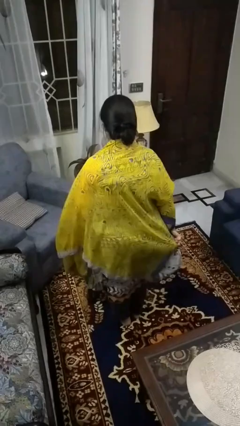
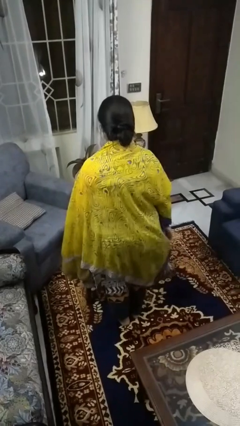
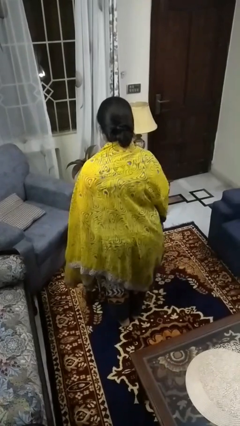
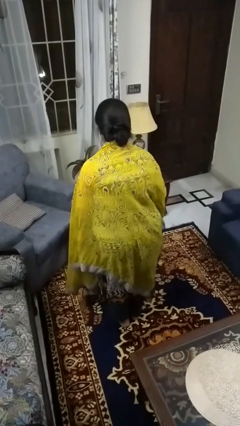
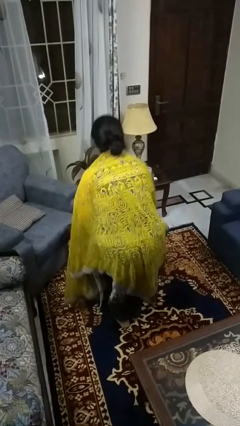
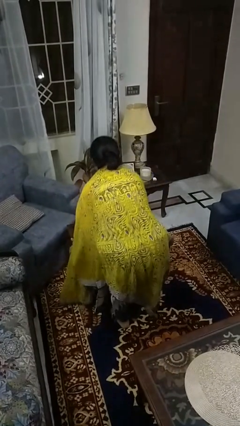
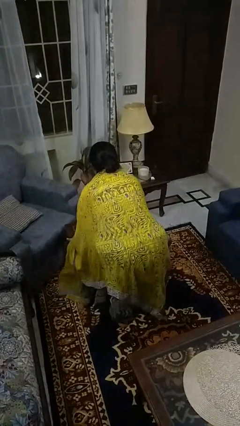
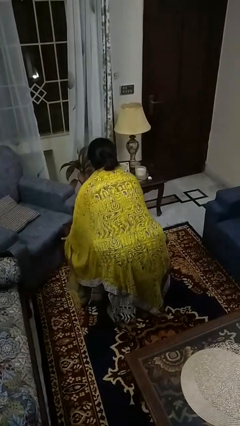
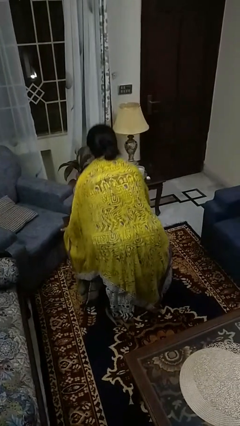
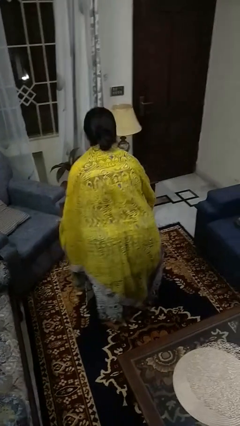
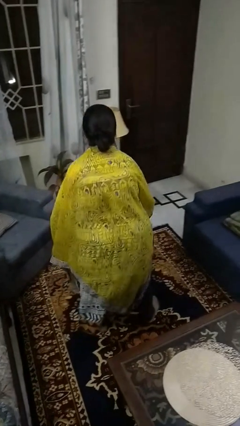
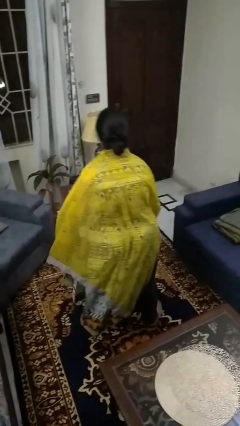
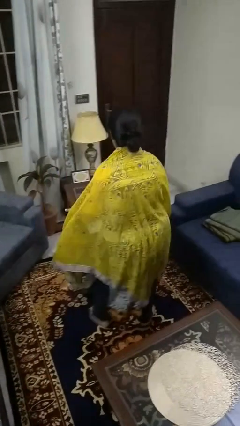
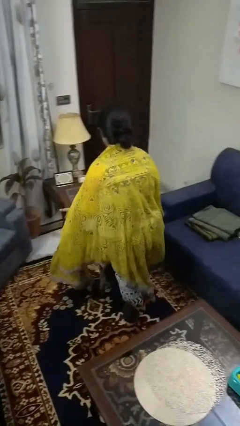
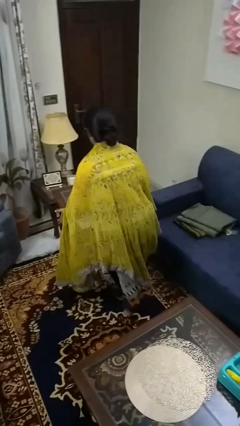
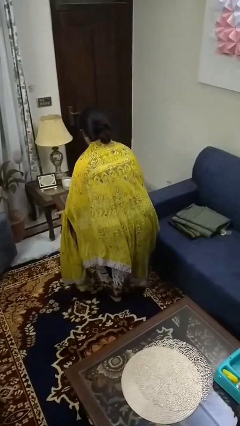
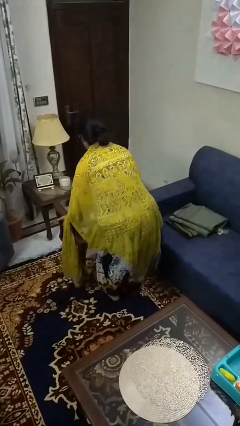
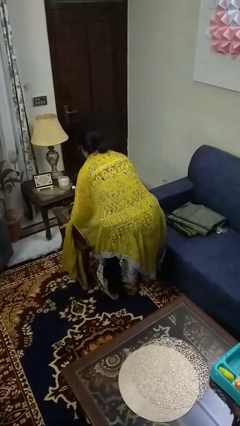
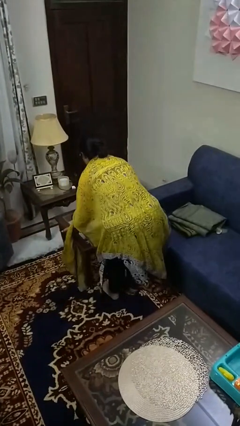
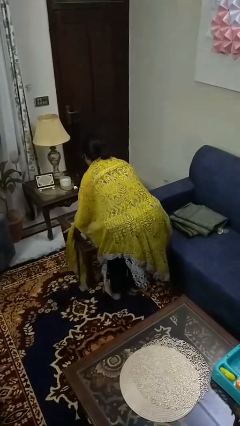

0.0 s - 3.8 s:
person carries furniture

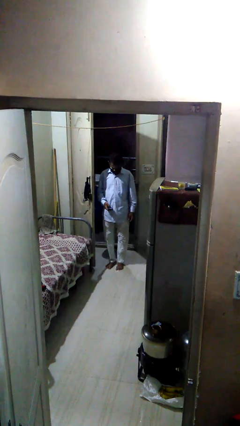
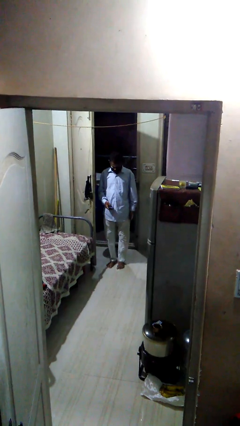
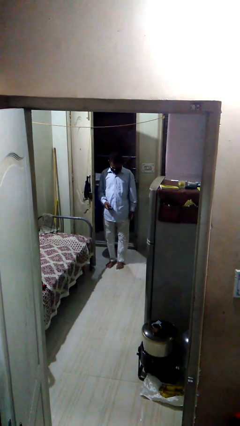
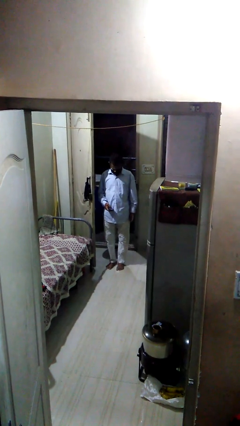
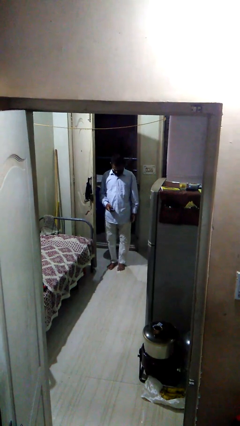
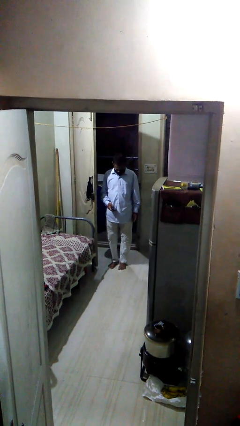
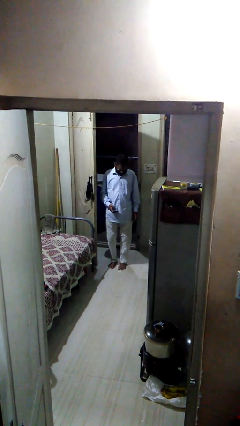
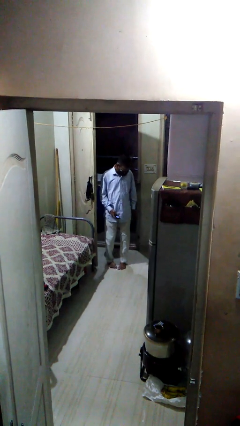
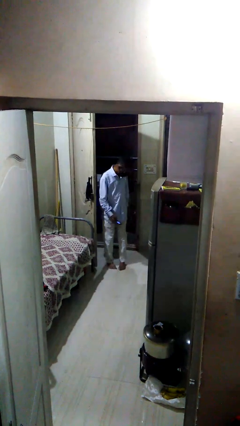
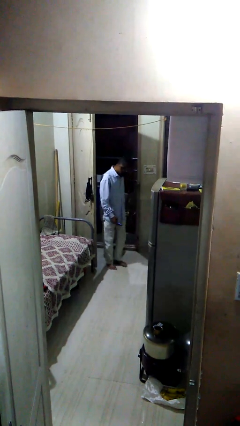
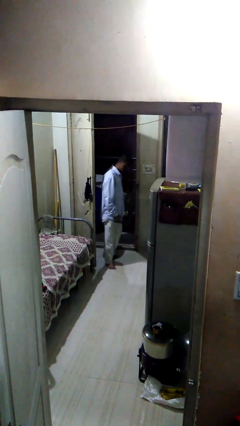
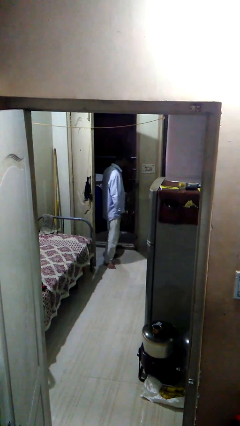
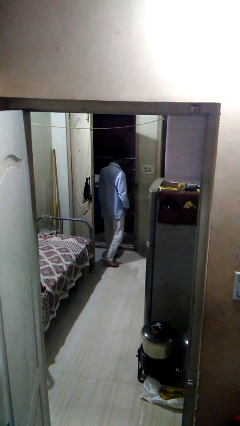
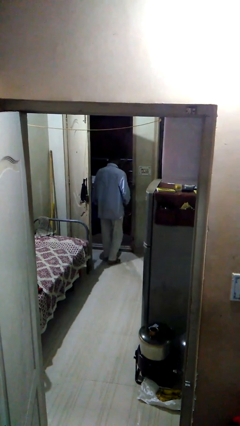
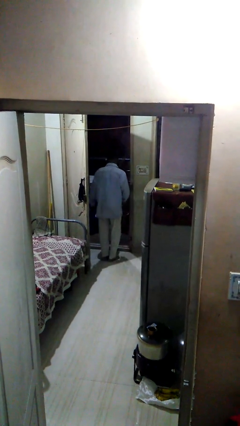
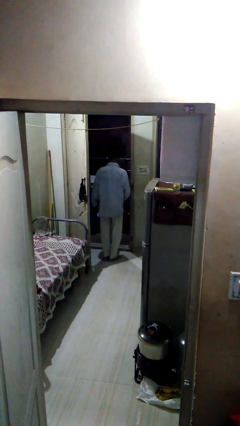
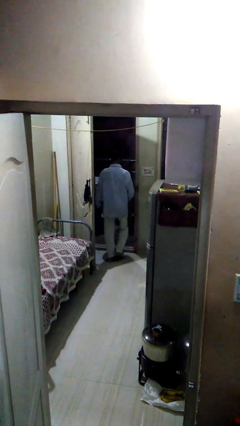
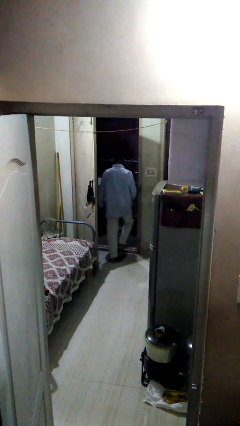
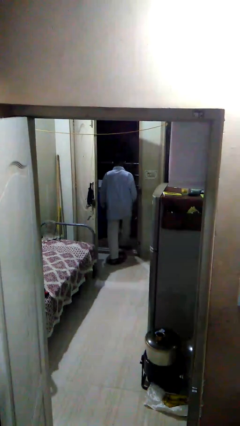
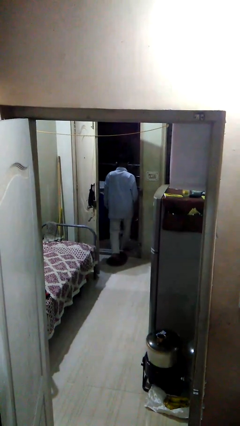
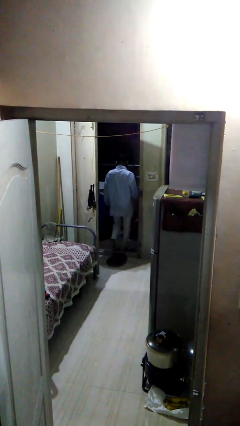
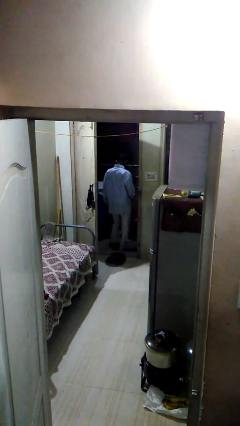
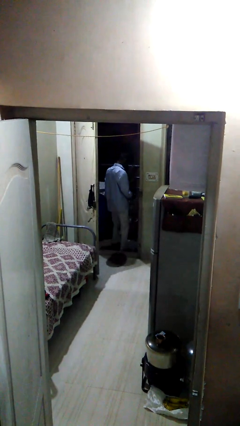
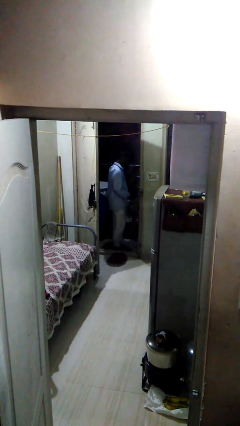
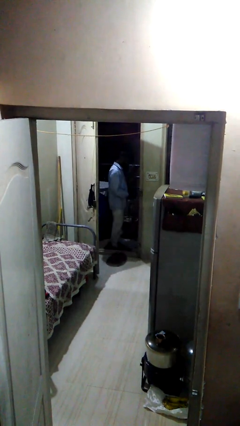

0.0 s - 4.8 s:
person exits scene through structure

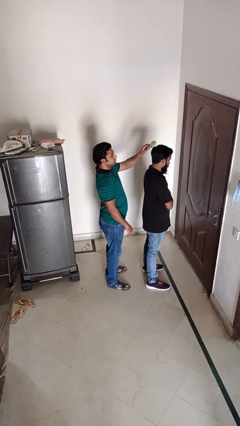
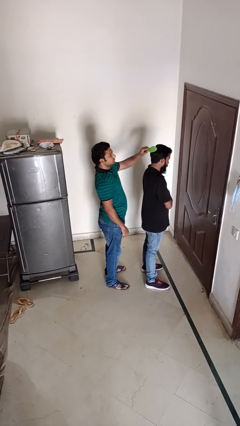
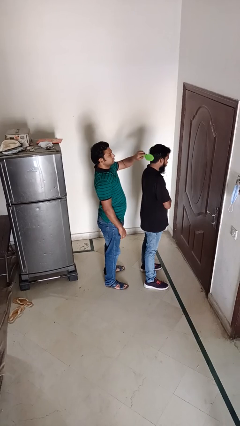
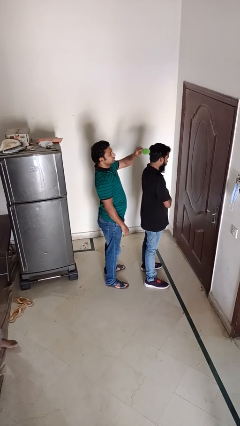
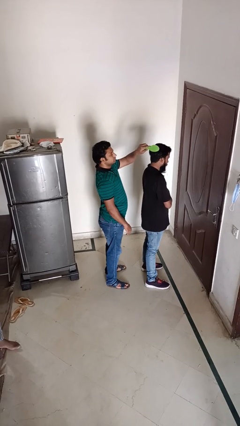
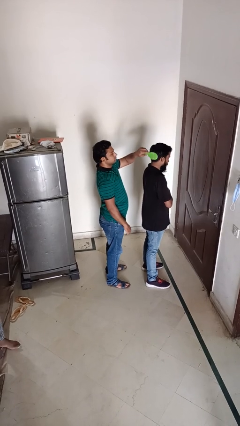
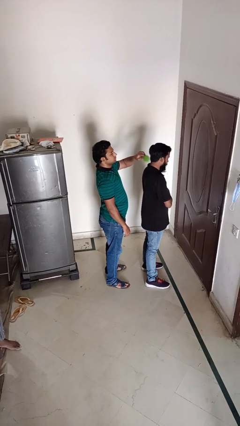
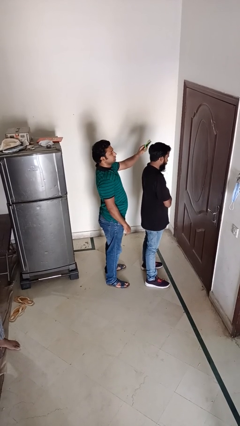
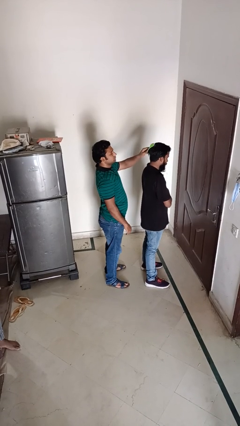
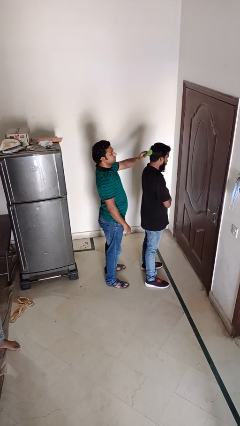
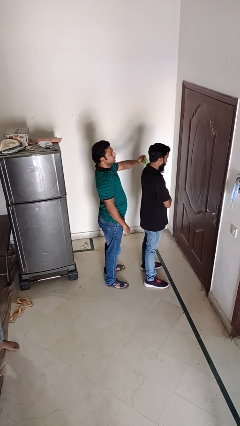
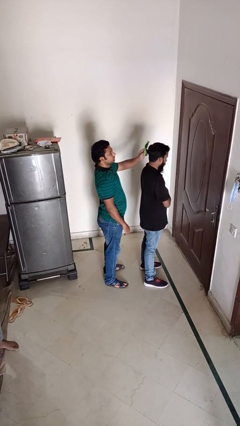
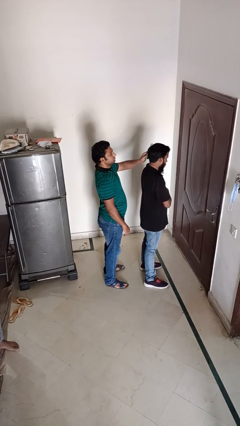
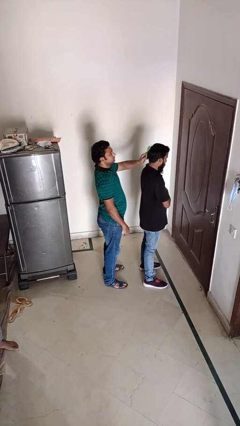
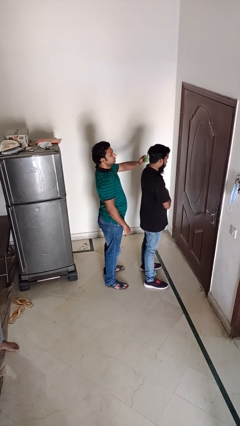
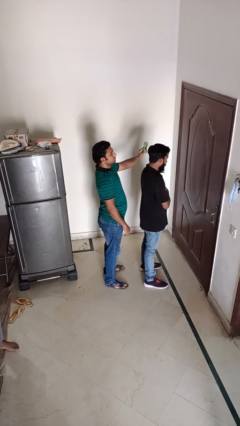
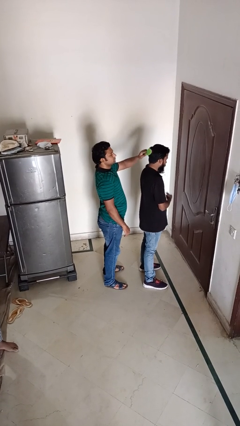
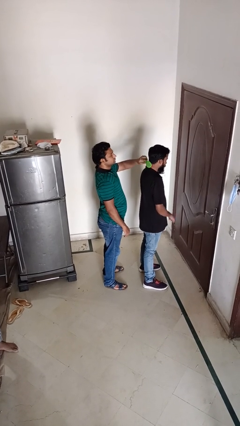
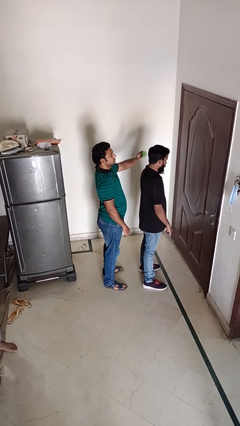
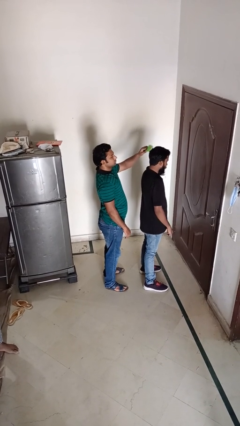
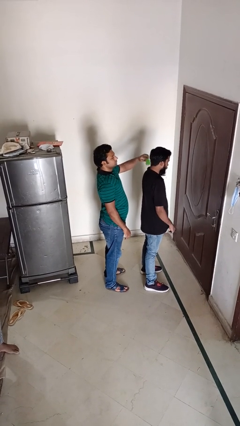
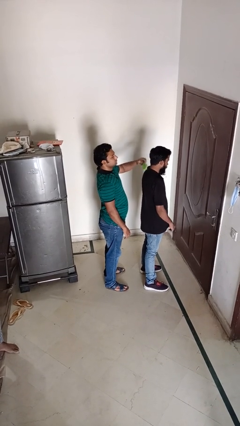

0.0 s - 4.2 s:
person brushes hair of person

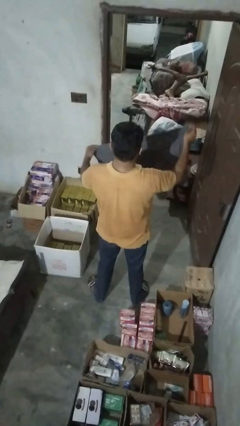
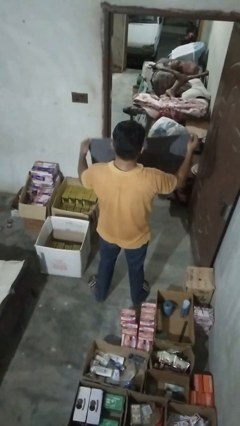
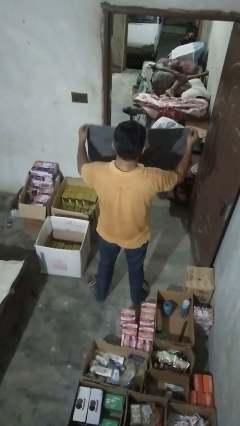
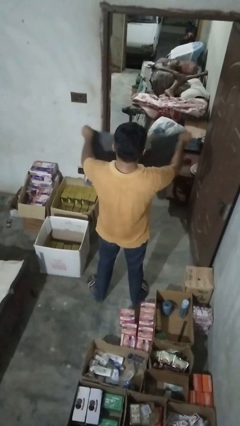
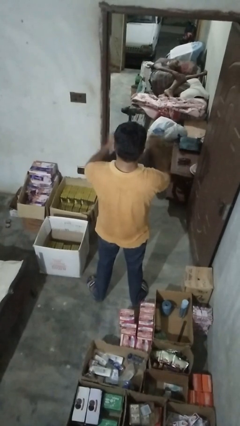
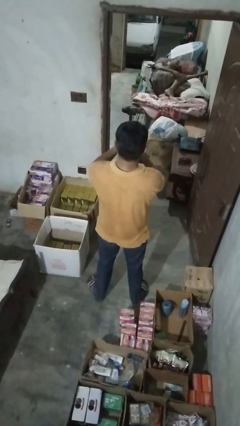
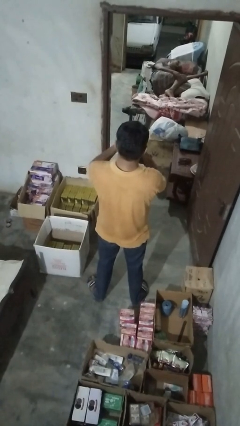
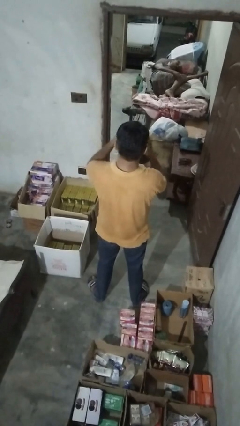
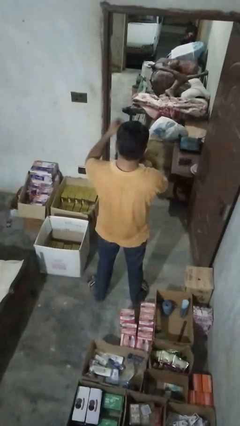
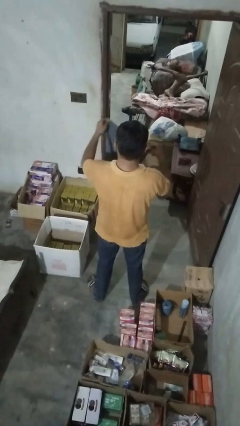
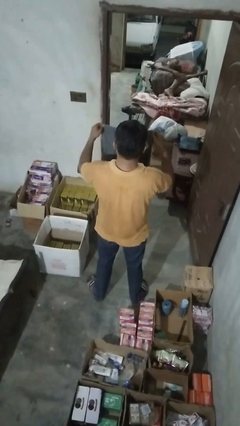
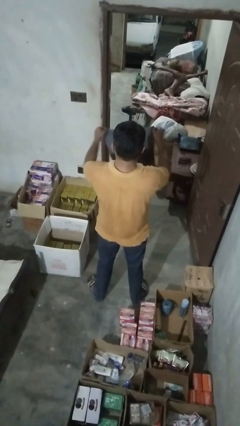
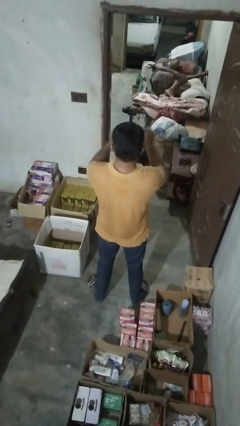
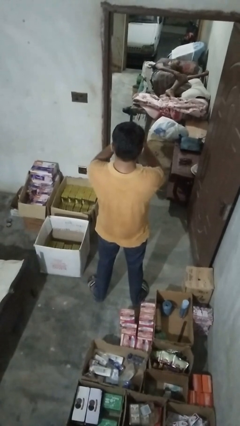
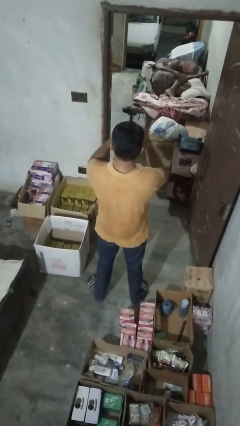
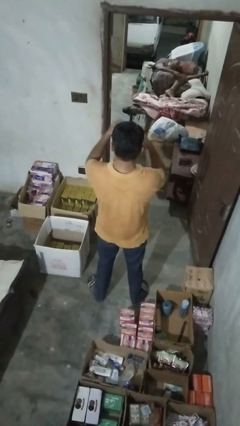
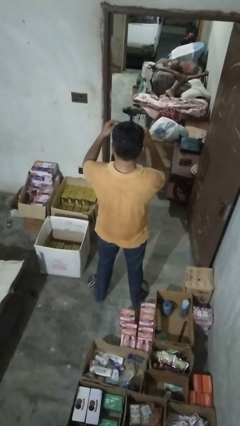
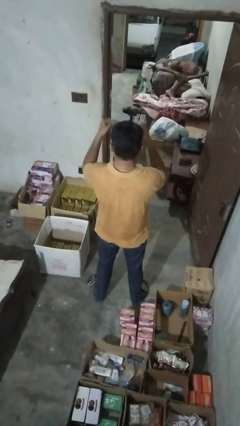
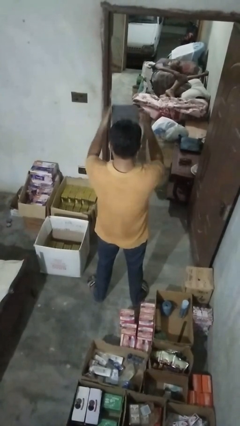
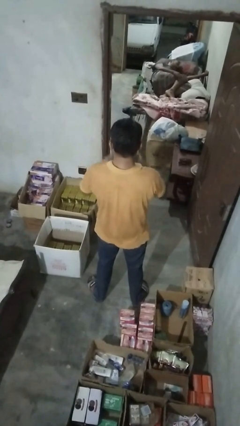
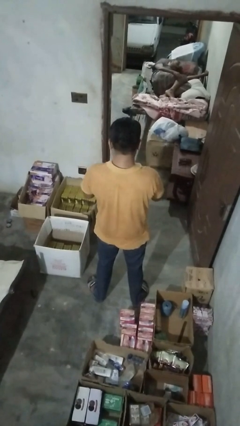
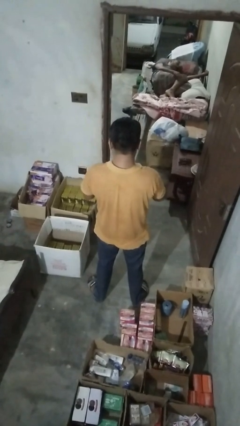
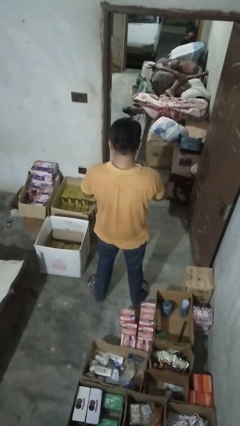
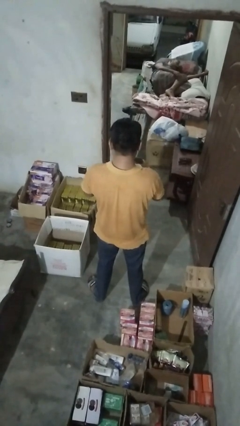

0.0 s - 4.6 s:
person folds towel

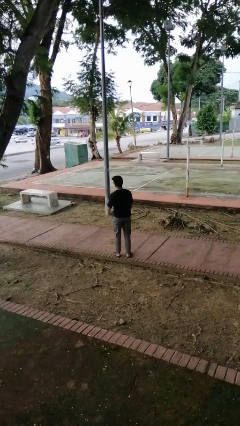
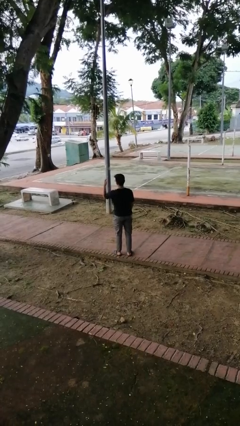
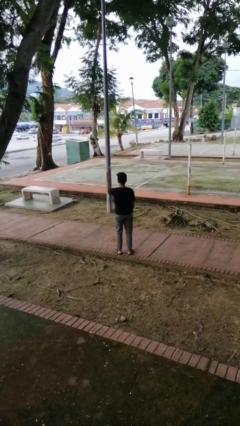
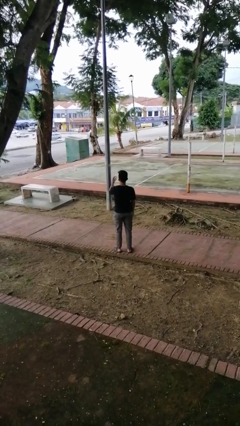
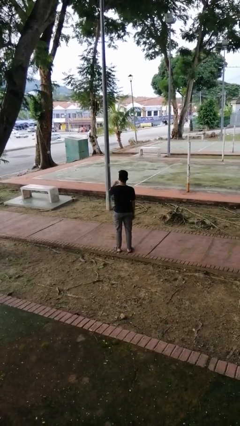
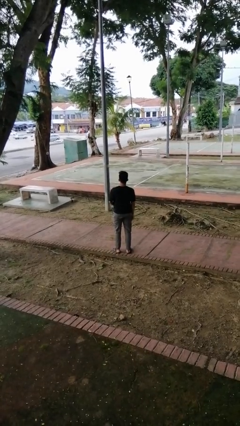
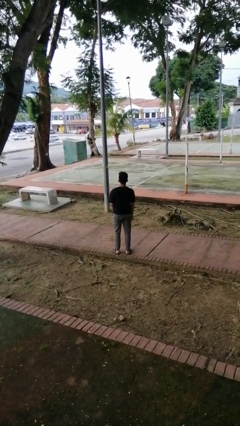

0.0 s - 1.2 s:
person karate chop
